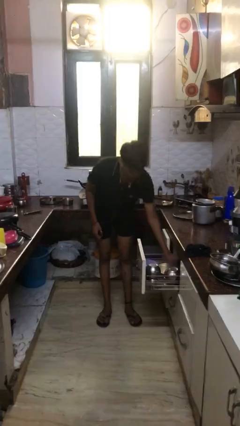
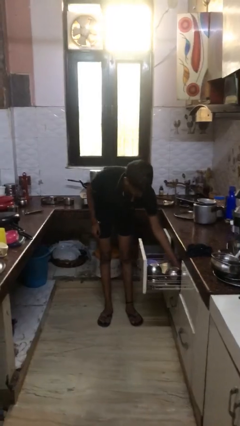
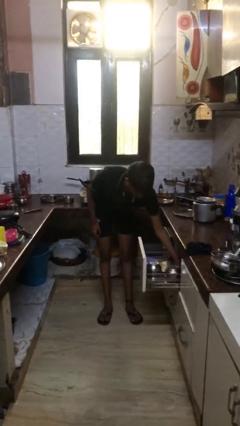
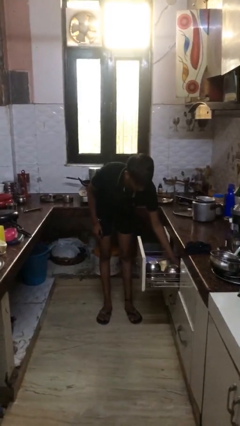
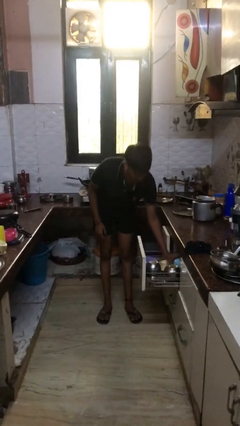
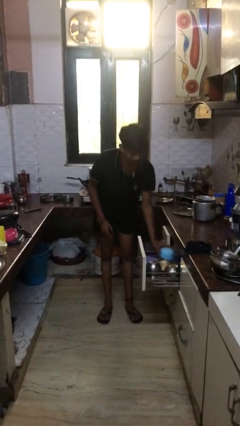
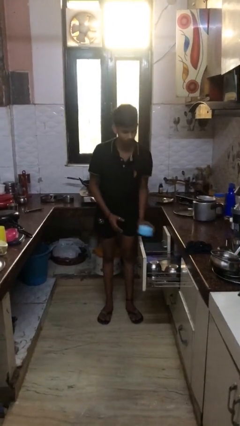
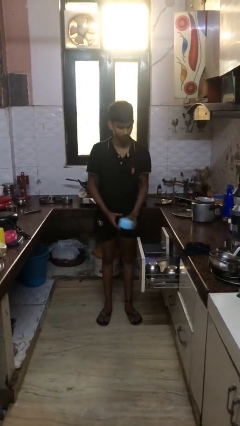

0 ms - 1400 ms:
person takes object from kitchen drawer

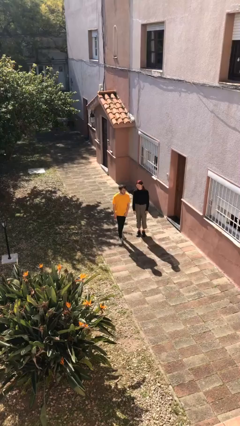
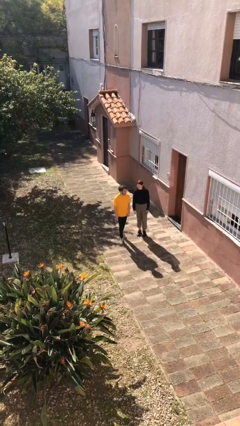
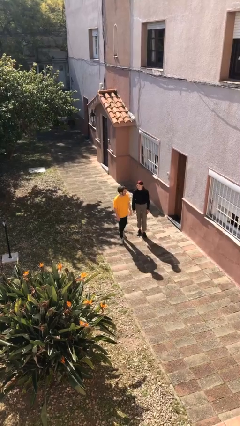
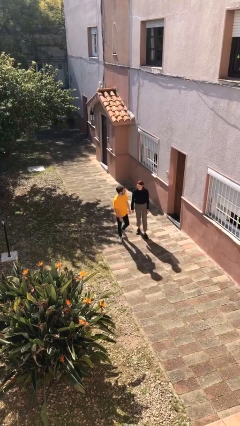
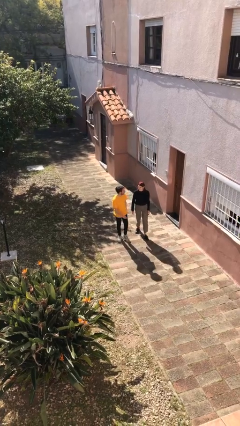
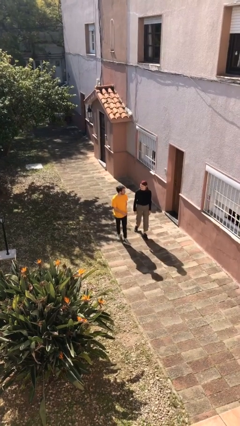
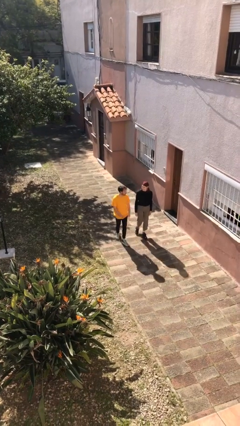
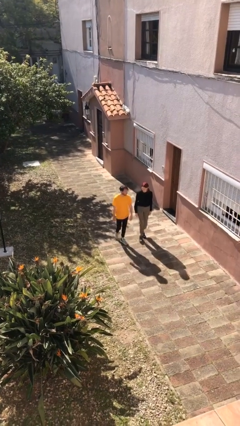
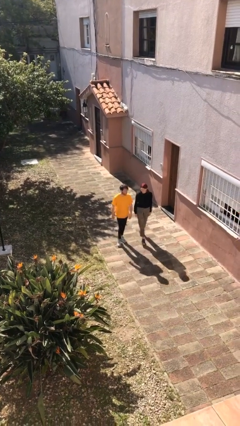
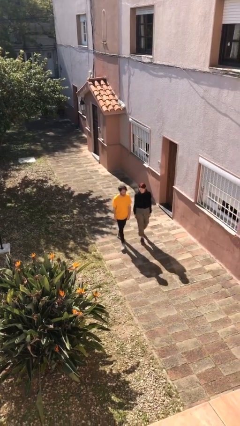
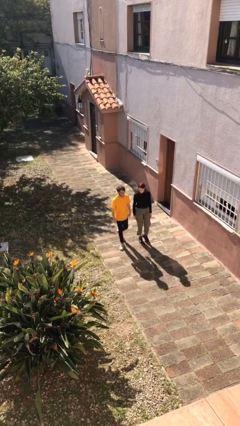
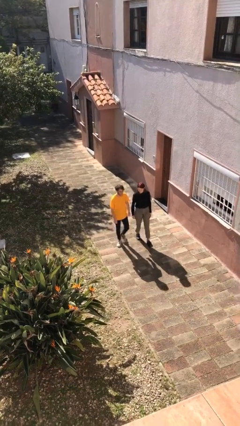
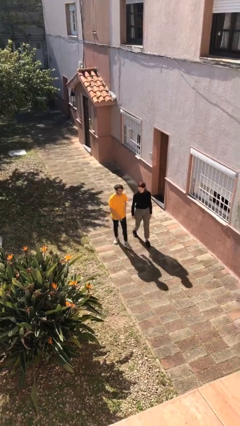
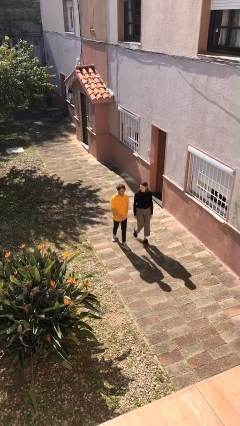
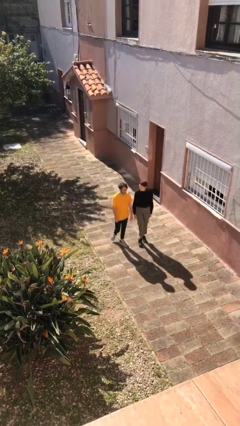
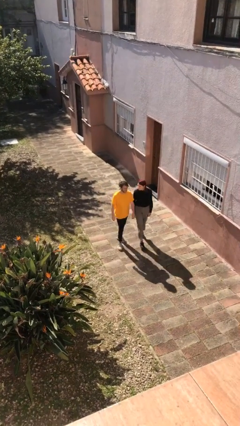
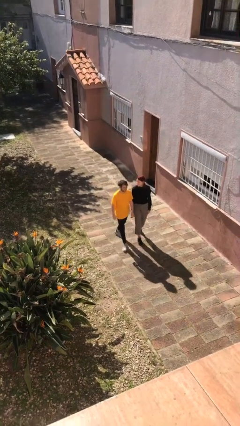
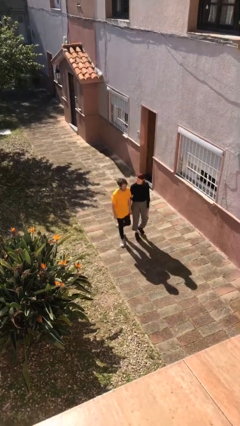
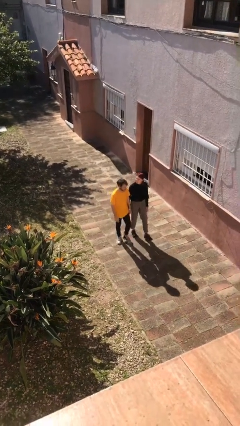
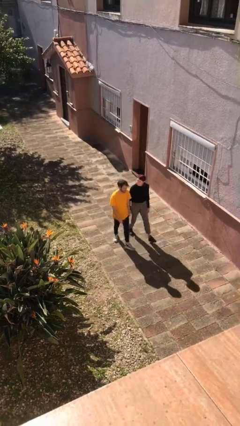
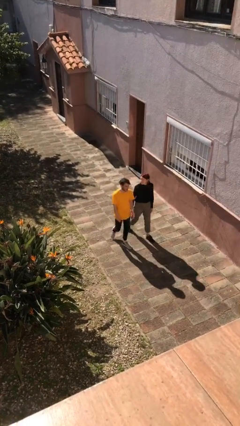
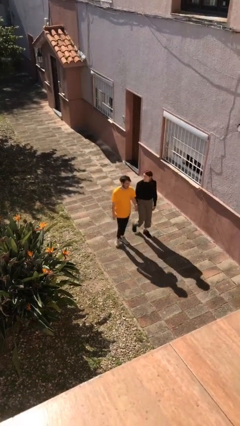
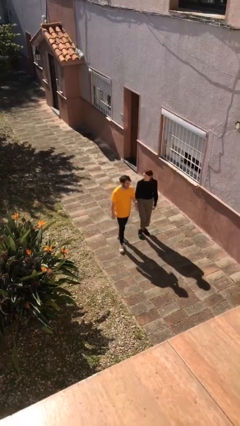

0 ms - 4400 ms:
person talks to person

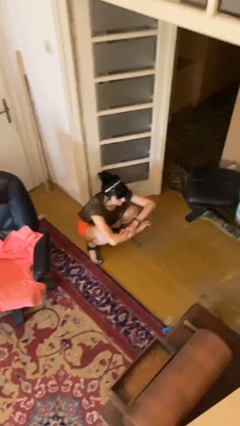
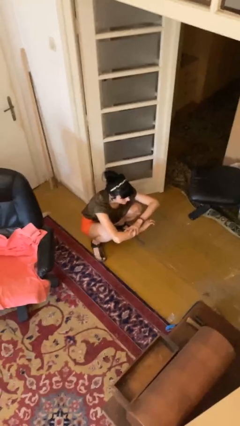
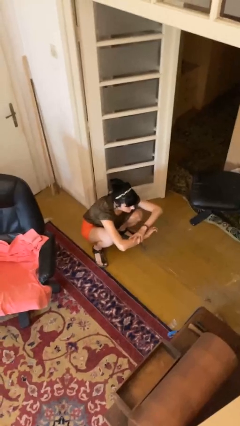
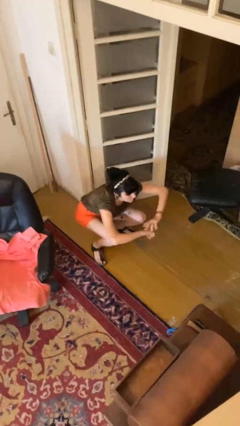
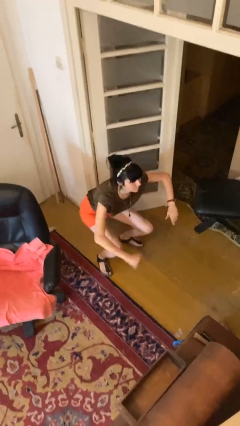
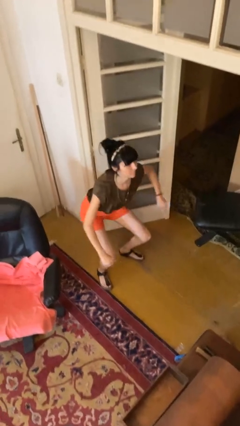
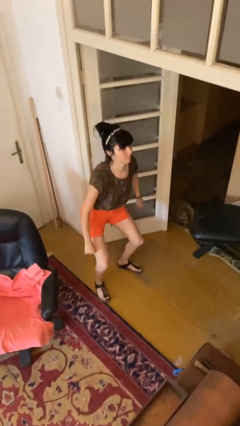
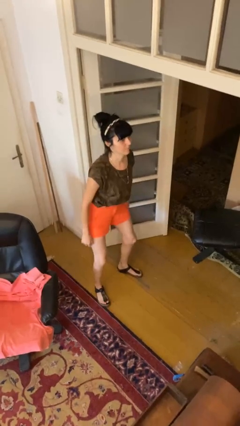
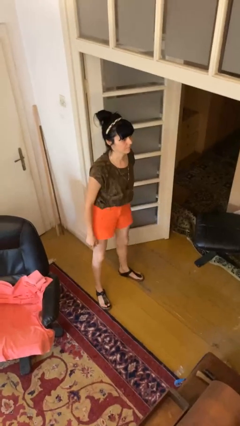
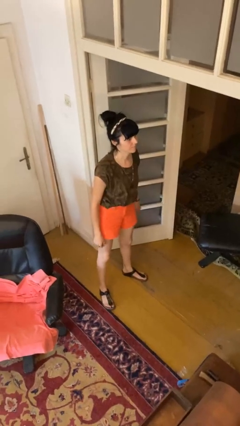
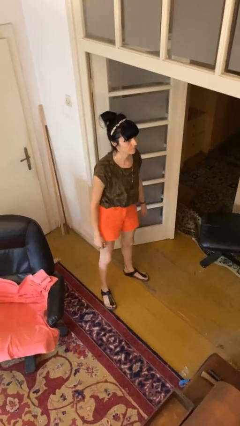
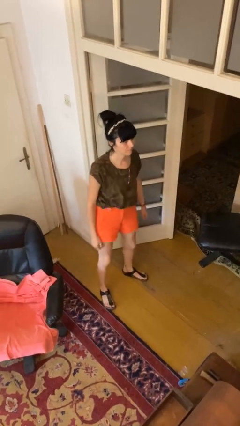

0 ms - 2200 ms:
person stands up

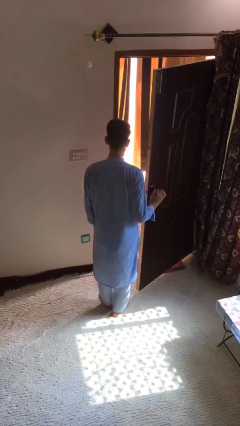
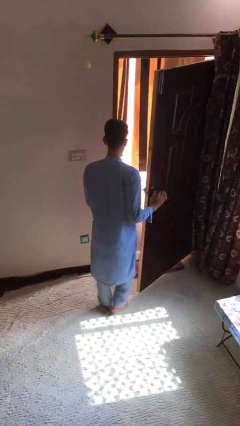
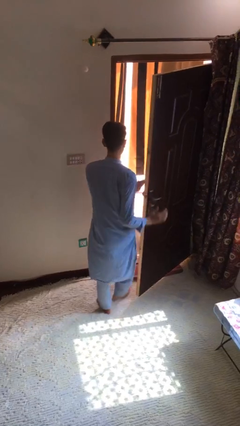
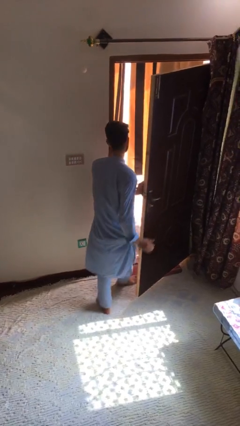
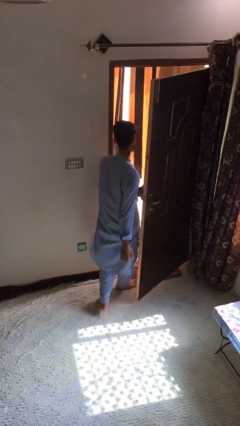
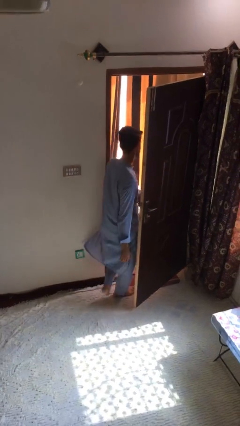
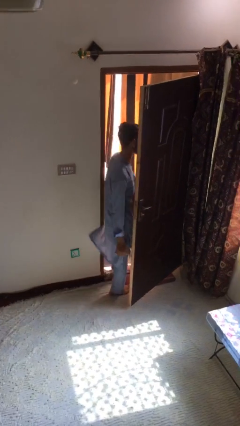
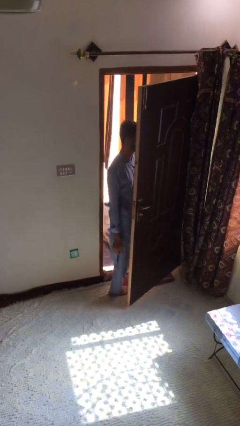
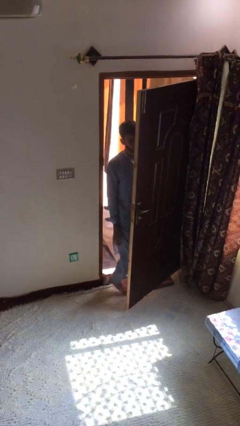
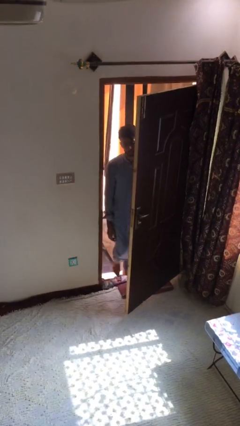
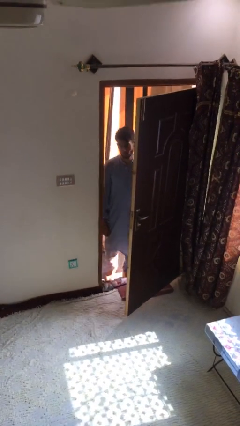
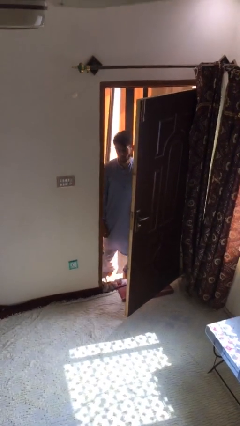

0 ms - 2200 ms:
person exits scene through structure

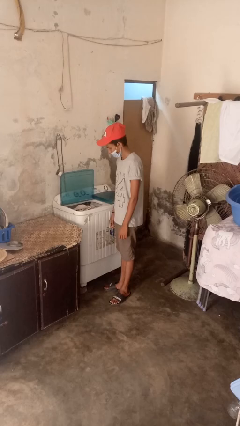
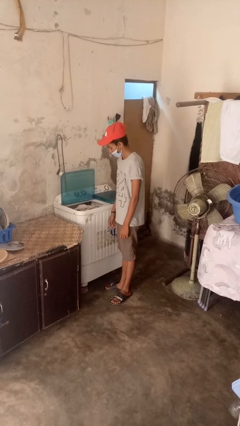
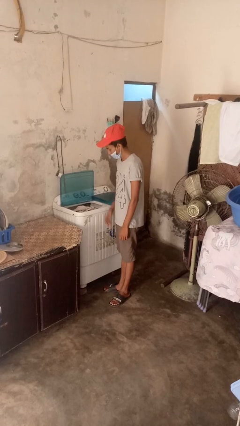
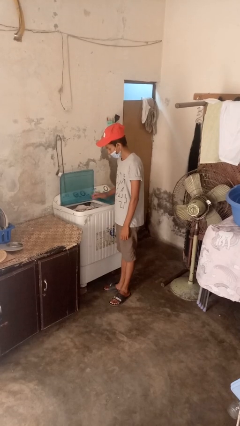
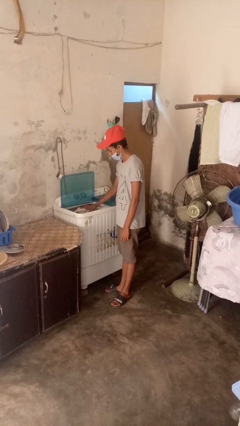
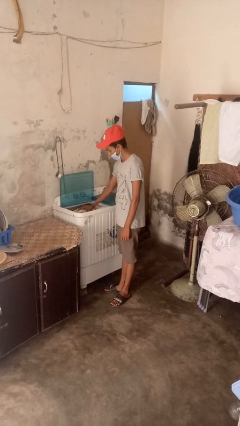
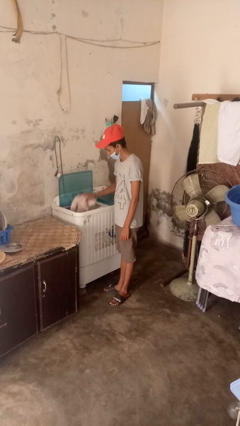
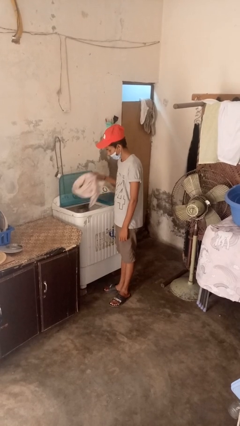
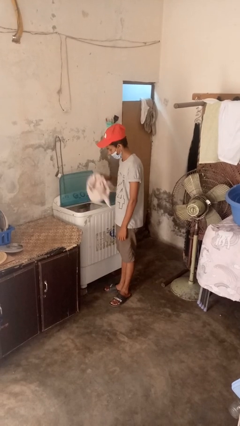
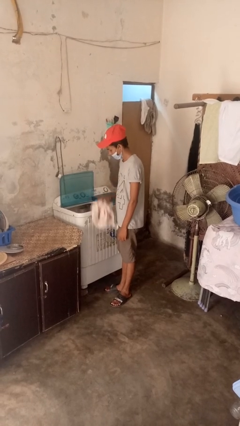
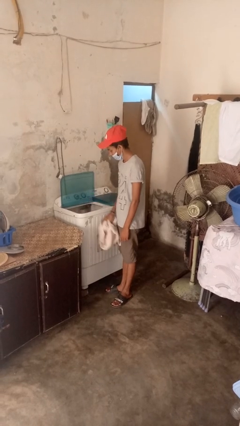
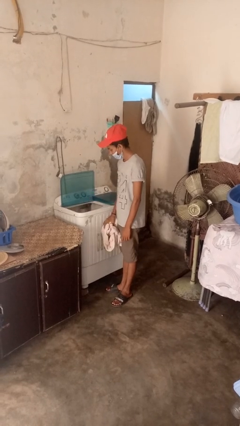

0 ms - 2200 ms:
person unloads dryer

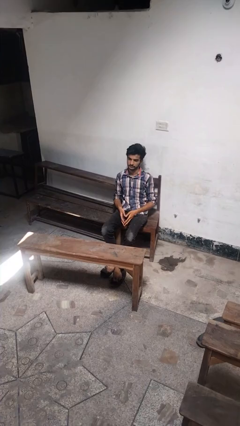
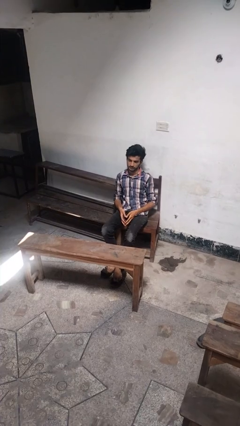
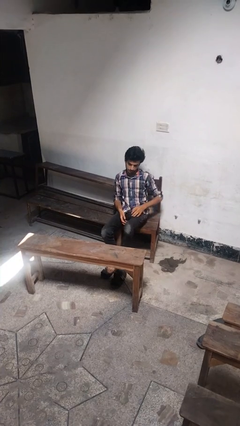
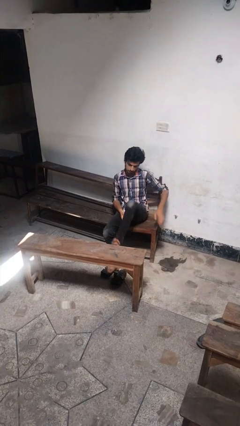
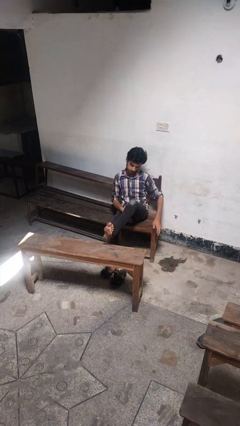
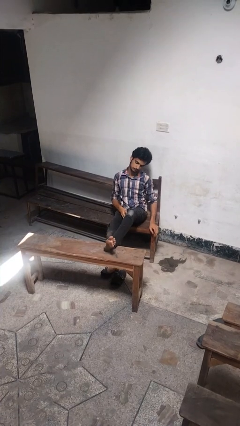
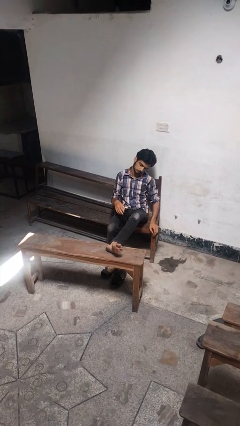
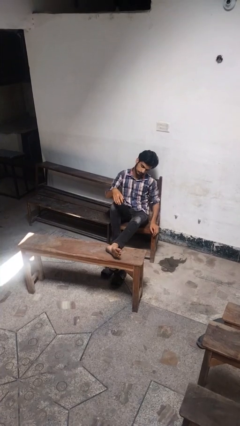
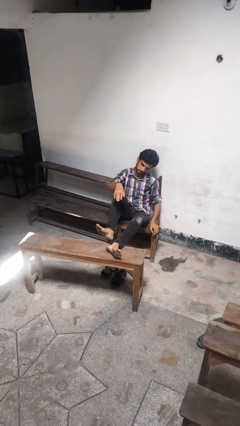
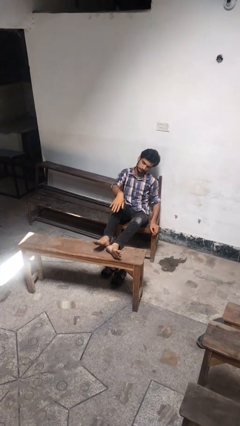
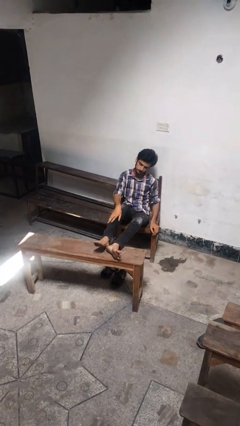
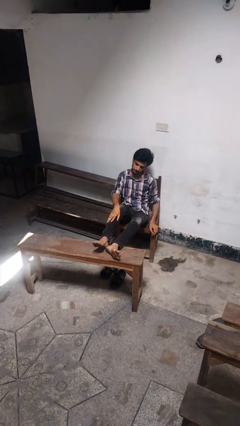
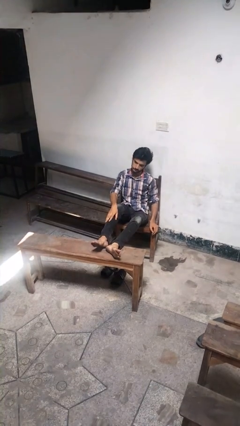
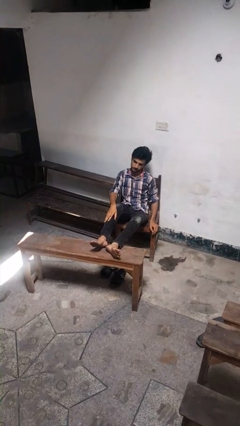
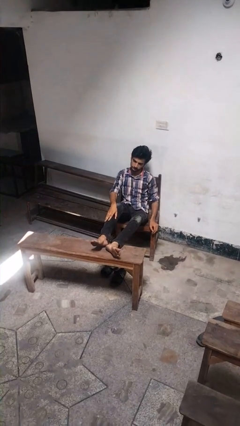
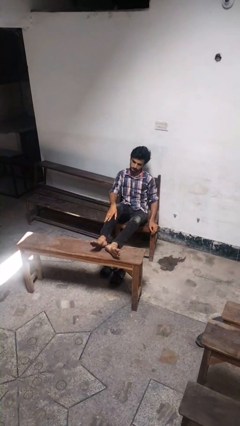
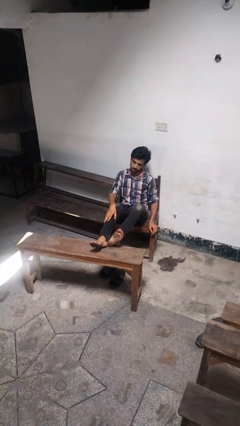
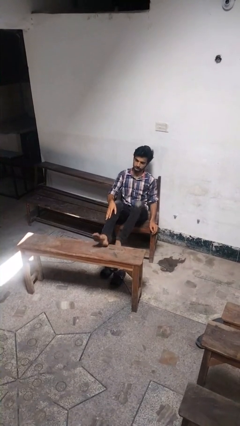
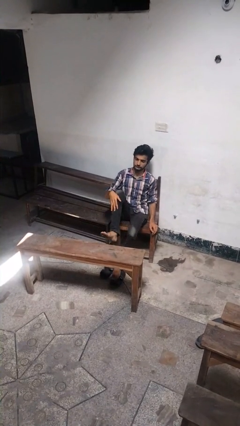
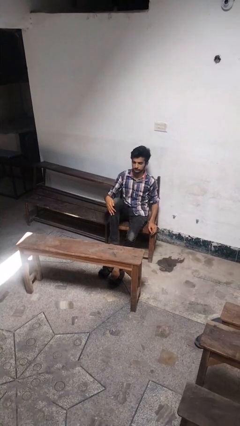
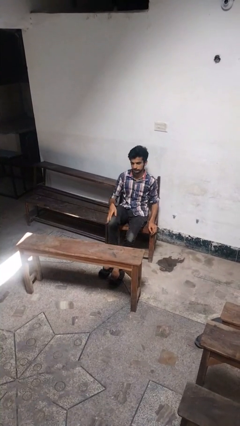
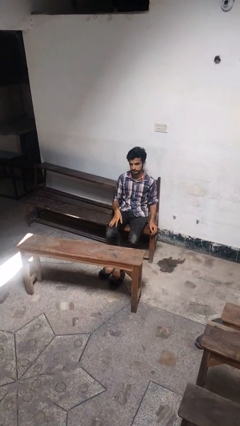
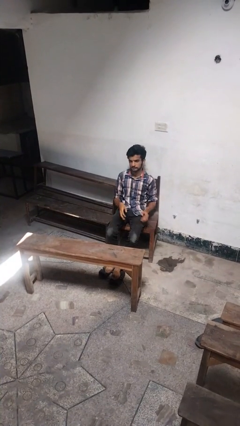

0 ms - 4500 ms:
person puts feet up

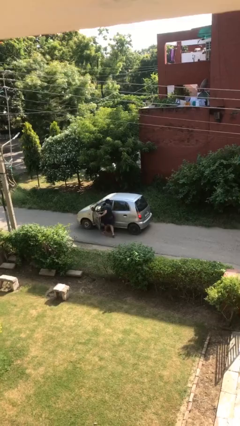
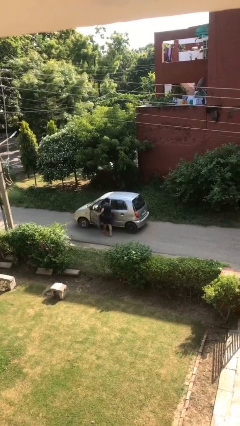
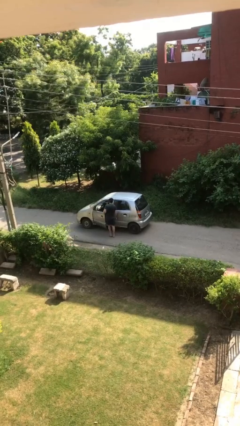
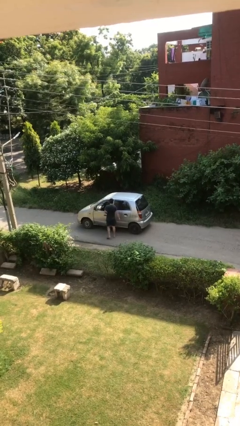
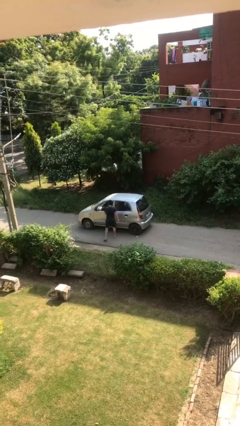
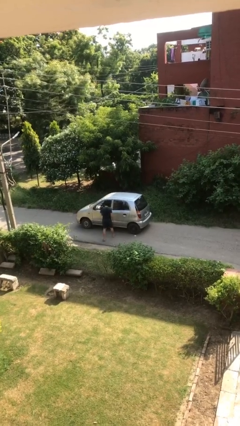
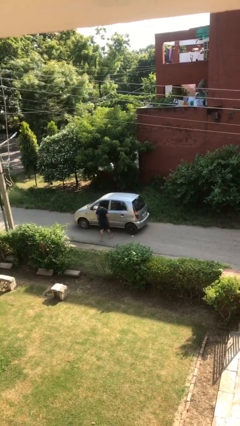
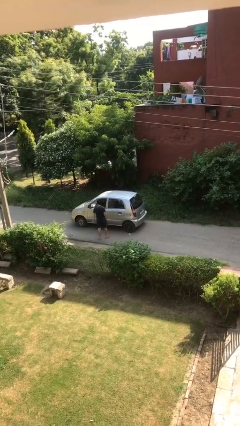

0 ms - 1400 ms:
car drops off person
